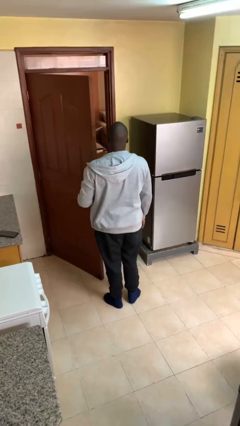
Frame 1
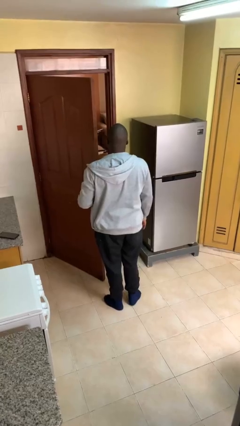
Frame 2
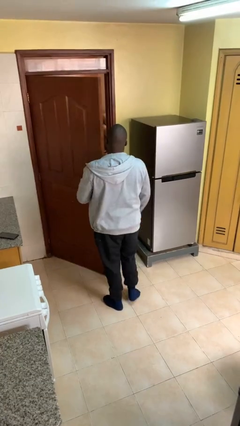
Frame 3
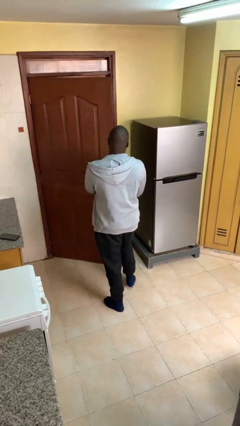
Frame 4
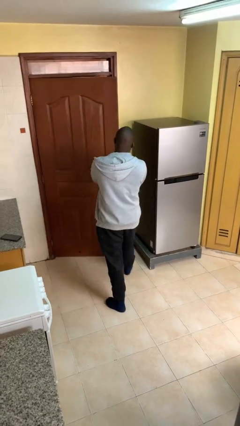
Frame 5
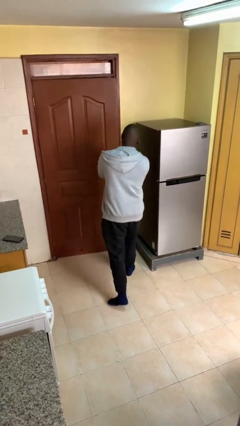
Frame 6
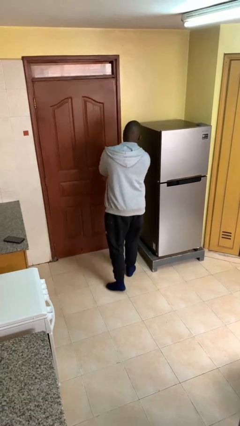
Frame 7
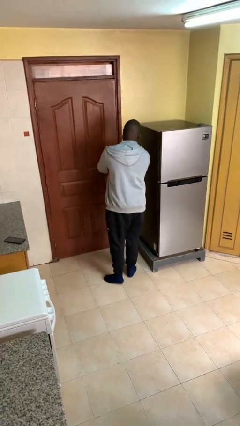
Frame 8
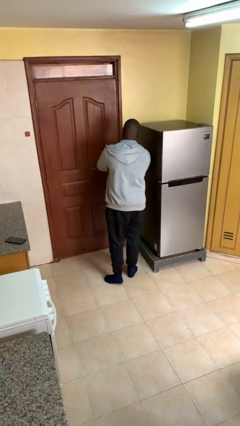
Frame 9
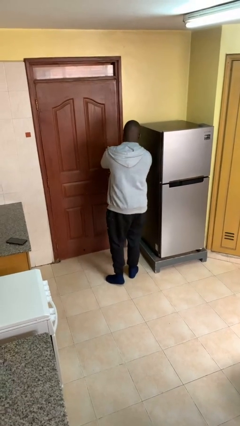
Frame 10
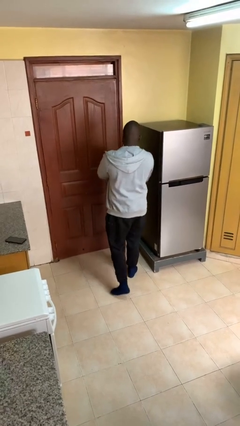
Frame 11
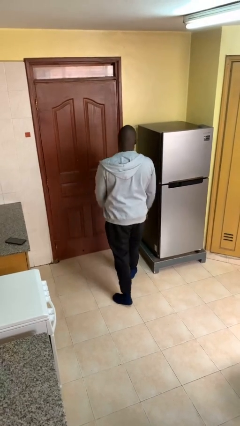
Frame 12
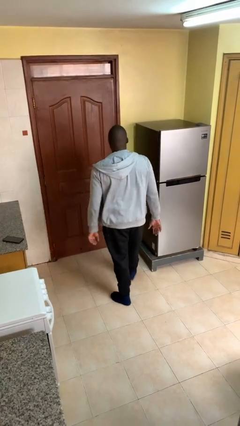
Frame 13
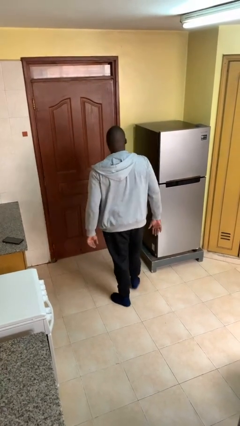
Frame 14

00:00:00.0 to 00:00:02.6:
person closes facility door

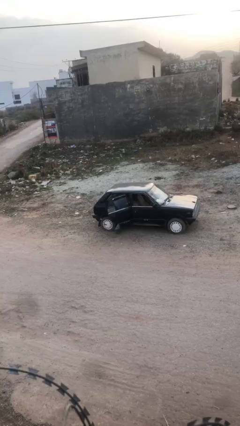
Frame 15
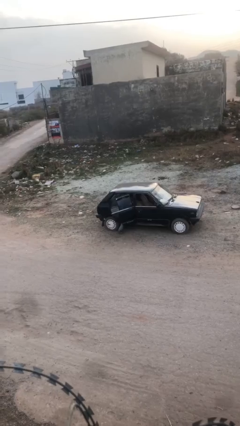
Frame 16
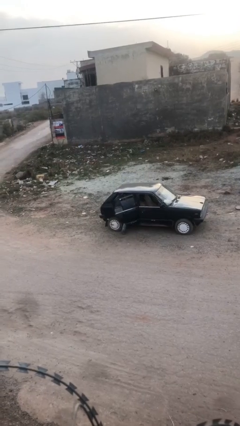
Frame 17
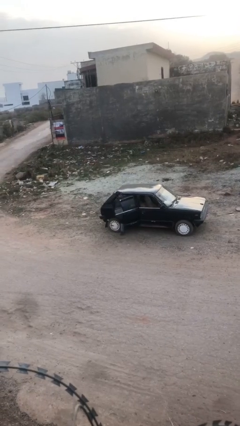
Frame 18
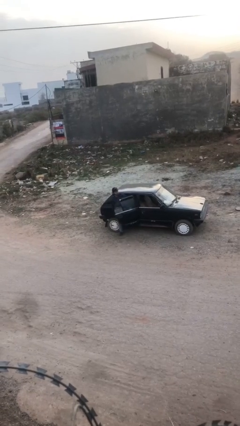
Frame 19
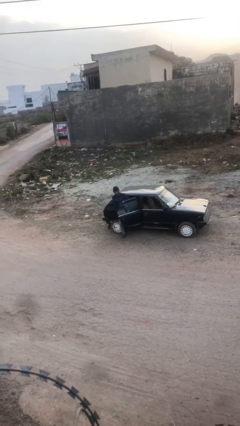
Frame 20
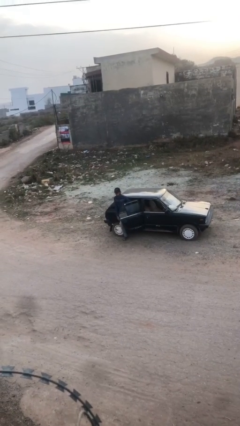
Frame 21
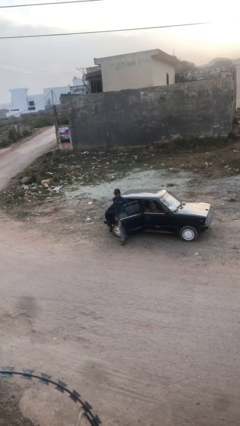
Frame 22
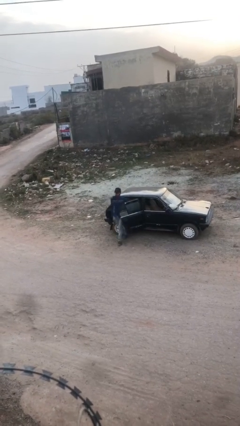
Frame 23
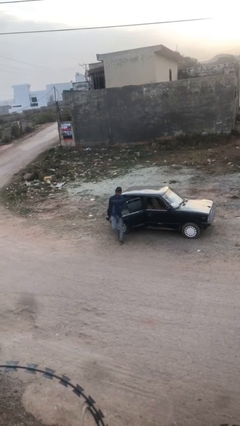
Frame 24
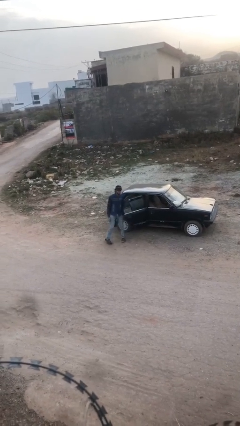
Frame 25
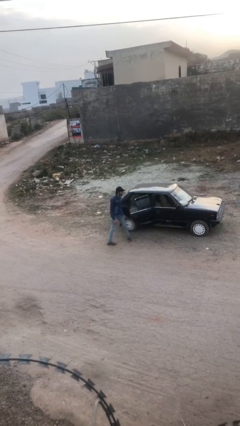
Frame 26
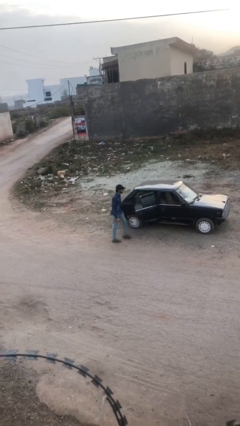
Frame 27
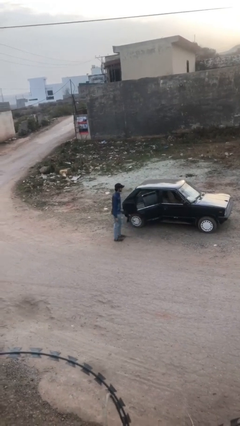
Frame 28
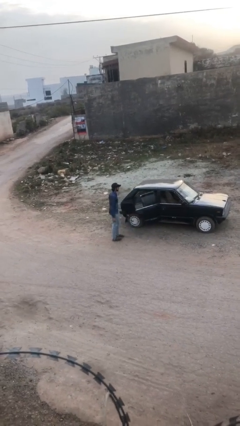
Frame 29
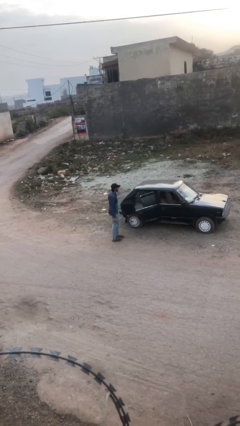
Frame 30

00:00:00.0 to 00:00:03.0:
person exits car

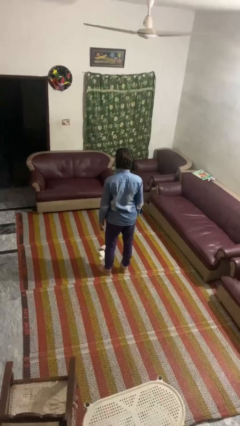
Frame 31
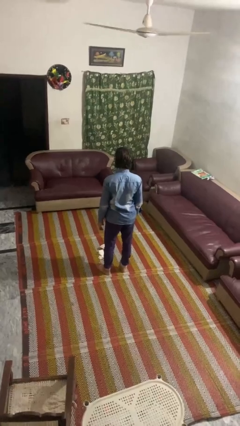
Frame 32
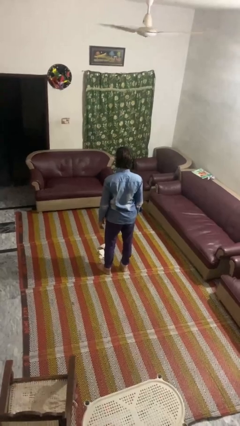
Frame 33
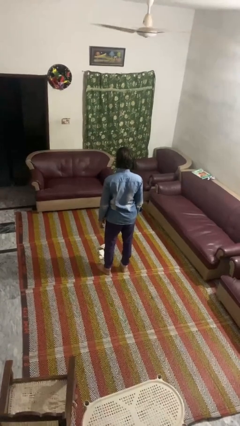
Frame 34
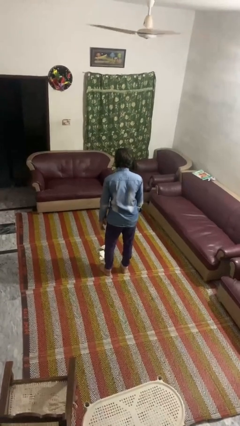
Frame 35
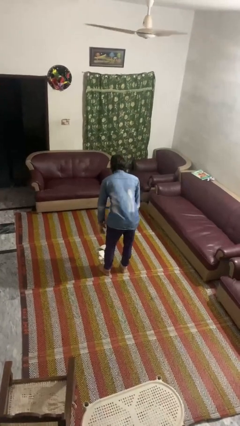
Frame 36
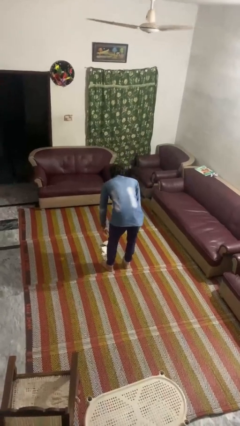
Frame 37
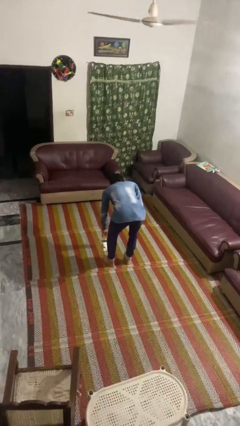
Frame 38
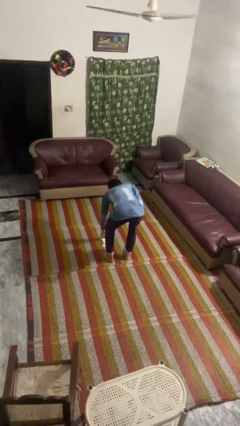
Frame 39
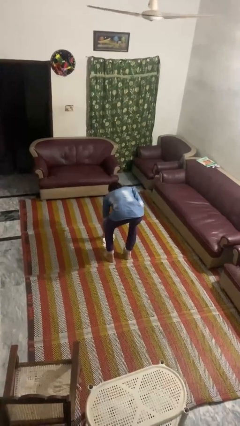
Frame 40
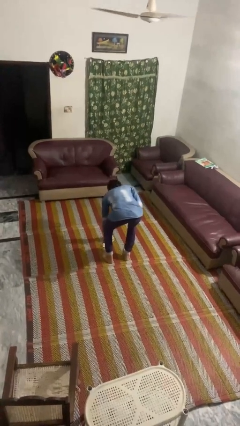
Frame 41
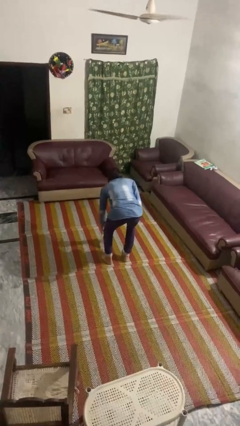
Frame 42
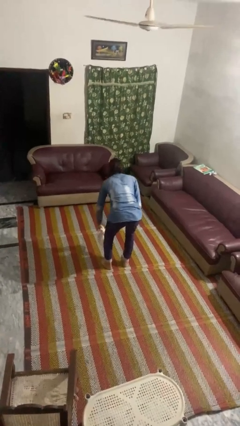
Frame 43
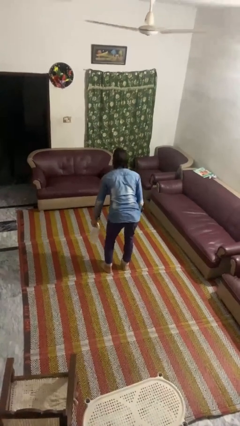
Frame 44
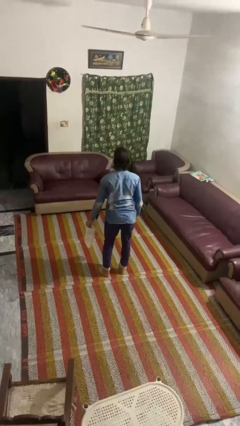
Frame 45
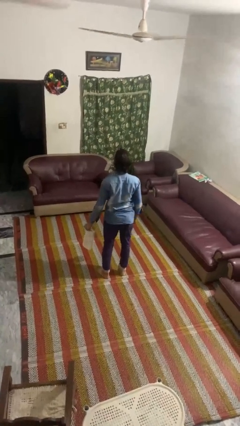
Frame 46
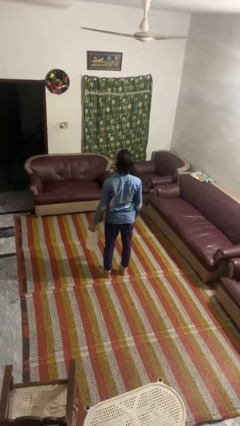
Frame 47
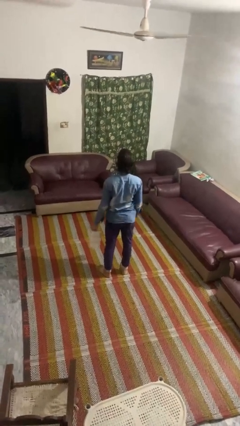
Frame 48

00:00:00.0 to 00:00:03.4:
person picks up object from floor

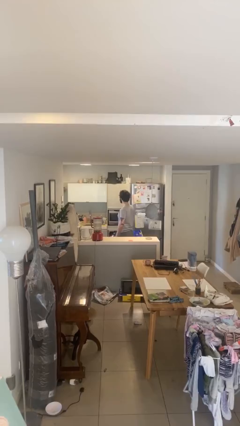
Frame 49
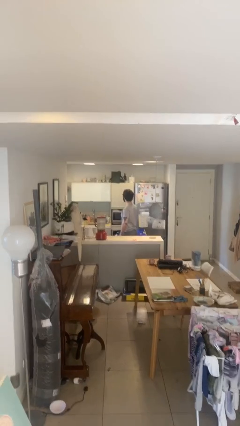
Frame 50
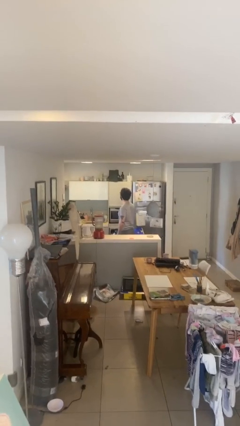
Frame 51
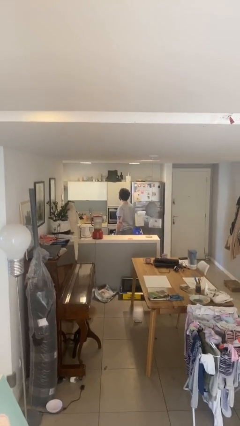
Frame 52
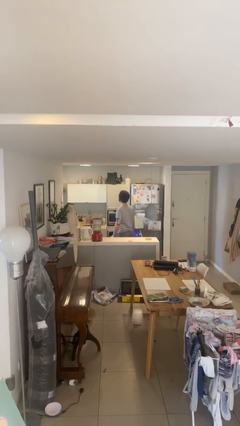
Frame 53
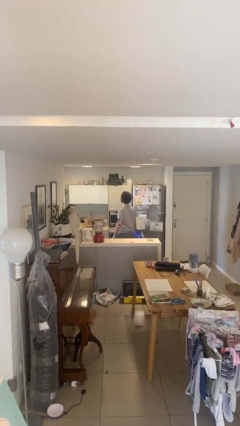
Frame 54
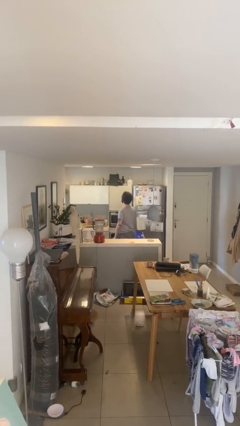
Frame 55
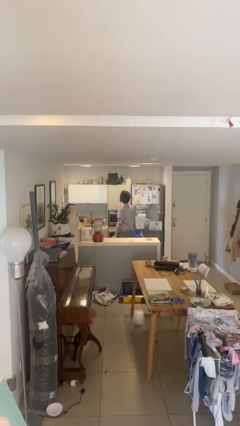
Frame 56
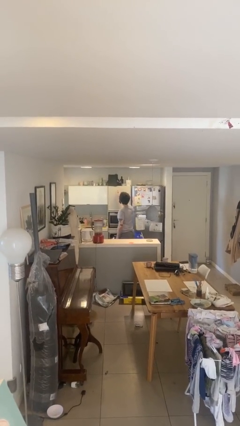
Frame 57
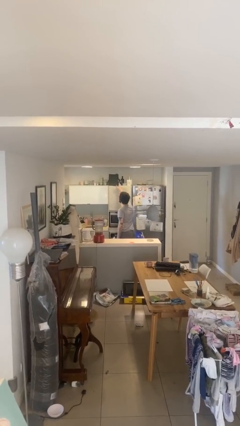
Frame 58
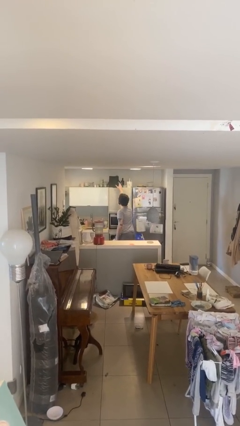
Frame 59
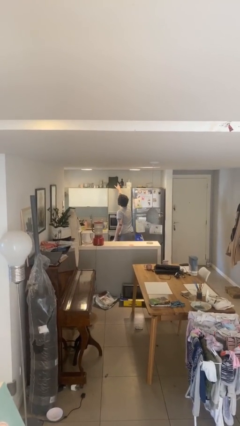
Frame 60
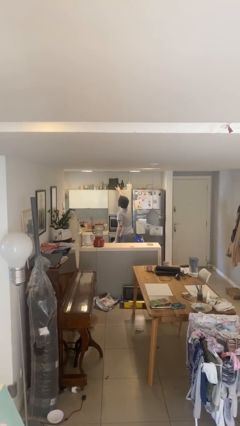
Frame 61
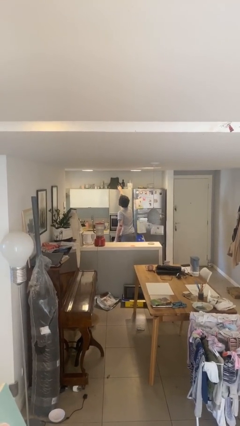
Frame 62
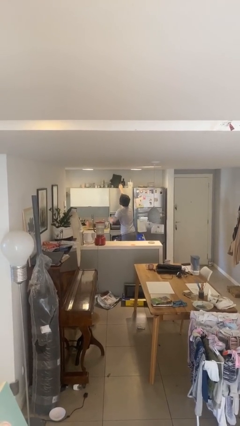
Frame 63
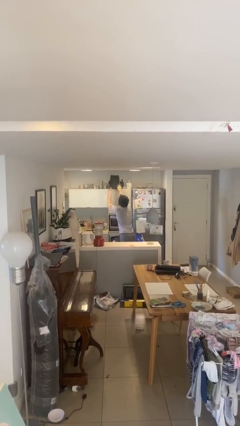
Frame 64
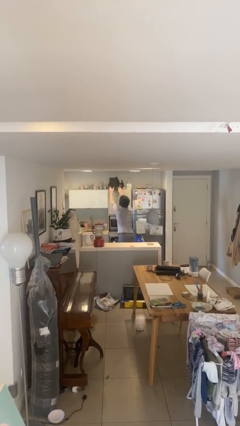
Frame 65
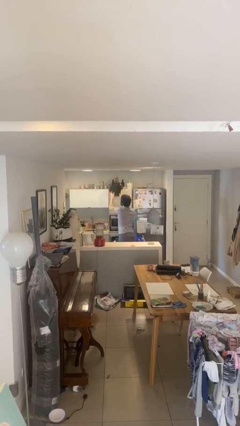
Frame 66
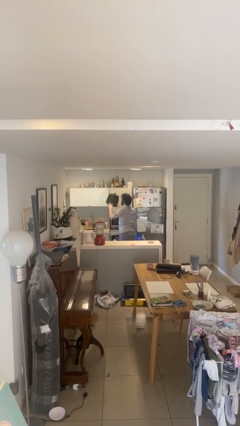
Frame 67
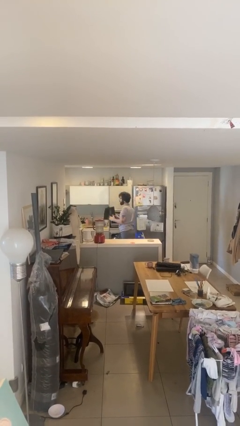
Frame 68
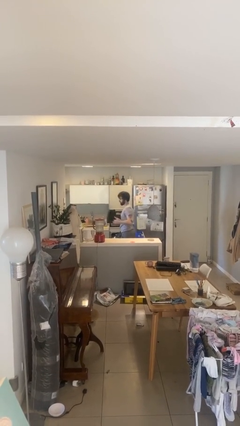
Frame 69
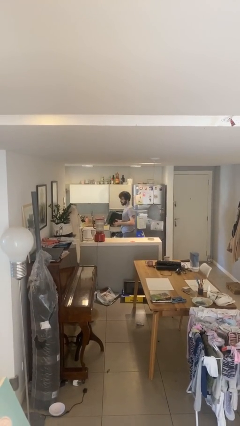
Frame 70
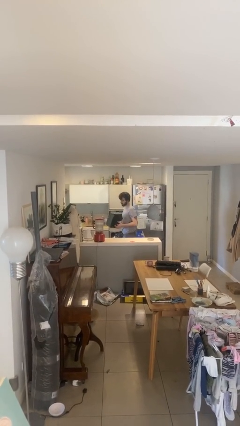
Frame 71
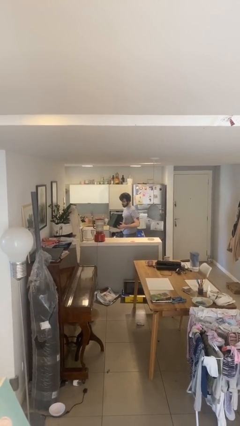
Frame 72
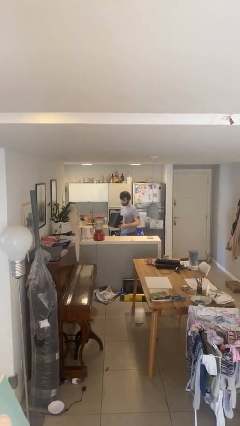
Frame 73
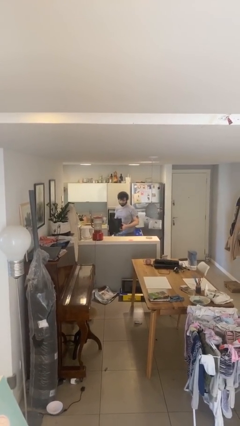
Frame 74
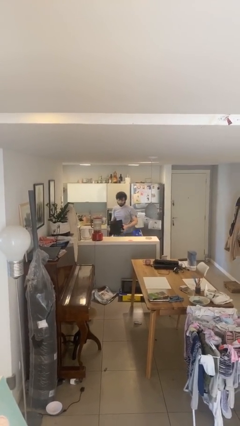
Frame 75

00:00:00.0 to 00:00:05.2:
person picks up object from shelf

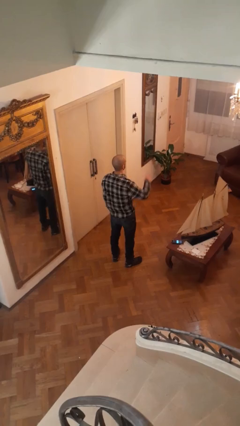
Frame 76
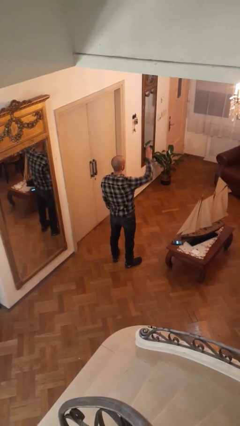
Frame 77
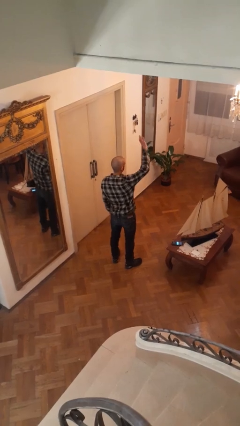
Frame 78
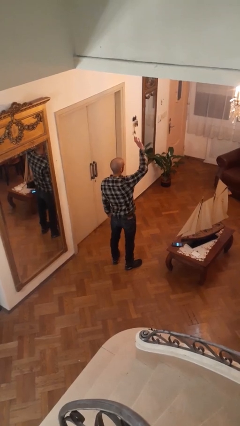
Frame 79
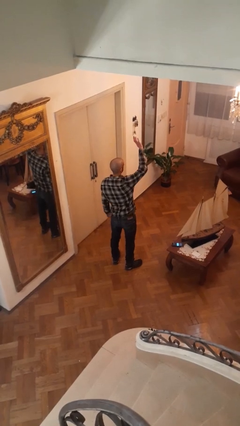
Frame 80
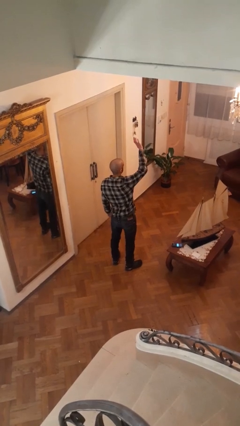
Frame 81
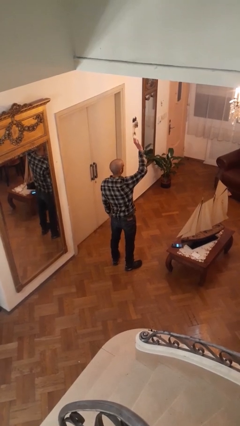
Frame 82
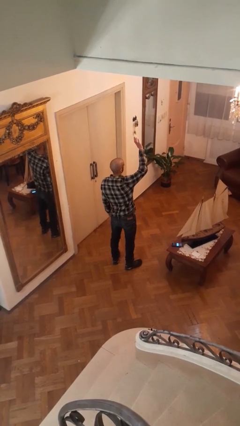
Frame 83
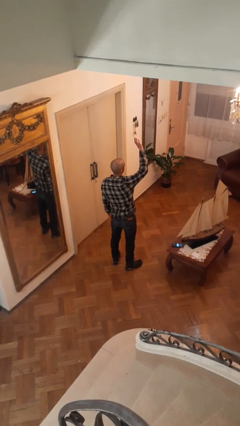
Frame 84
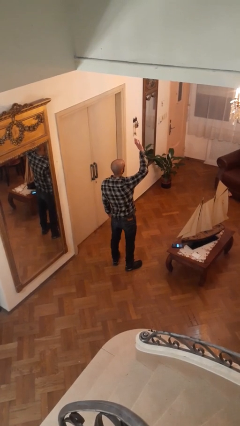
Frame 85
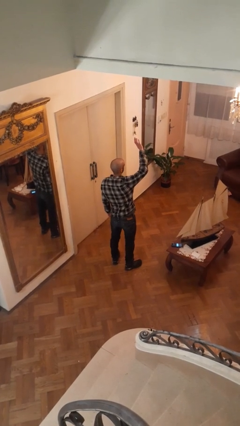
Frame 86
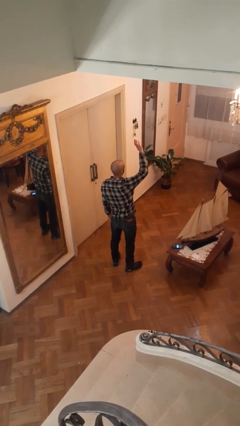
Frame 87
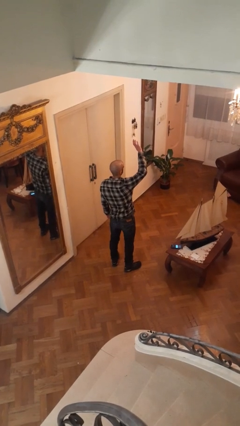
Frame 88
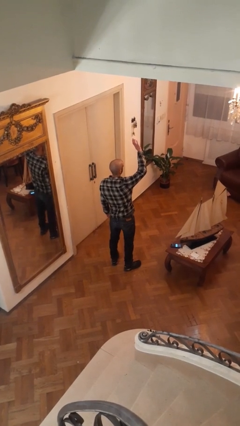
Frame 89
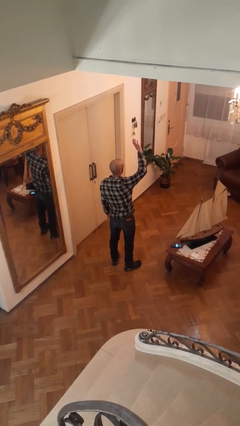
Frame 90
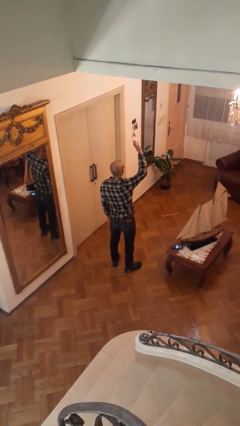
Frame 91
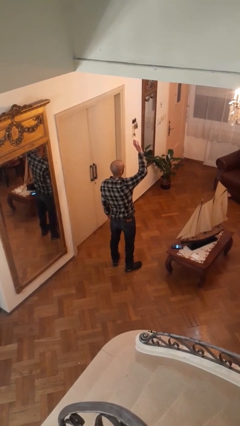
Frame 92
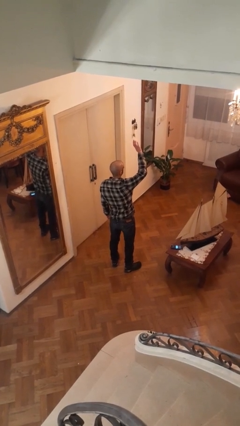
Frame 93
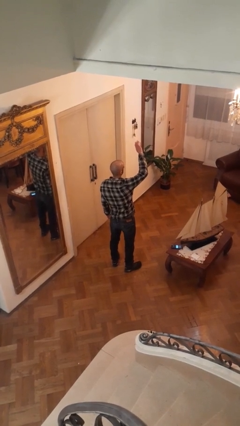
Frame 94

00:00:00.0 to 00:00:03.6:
person gestures raise hand
